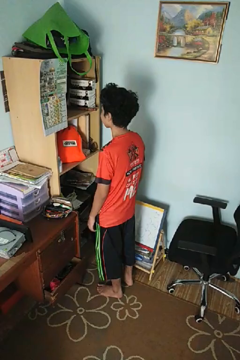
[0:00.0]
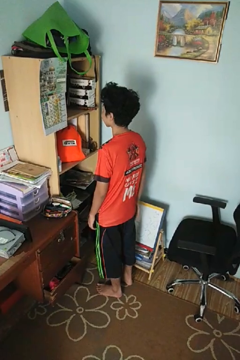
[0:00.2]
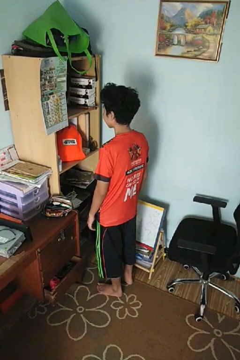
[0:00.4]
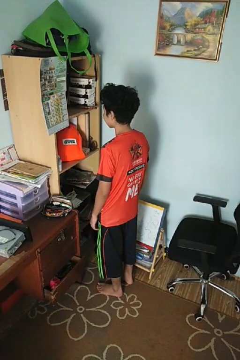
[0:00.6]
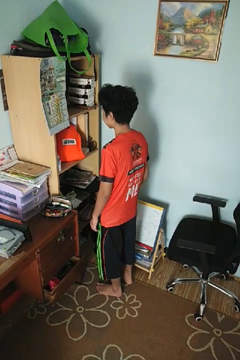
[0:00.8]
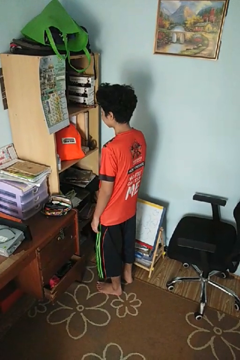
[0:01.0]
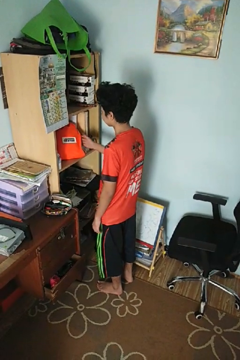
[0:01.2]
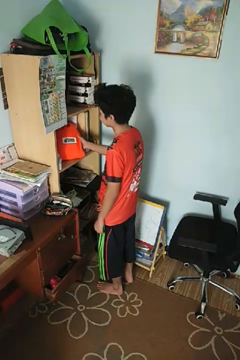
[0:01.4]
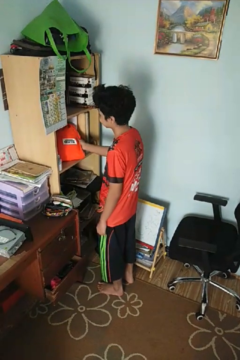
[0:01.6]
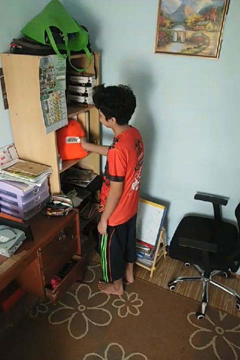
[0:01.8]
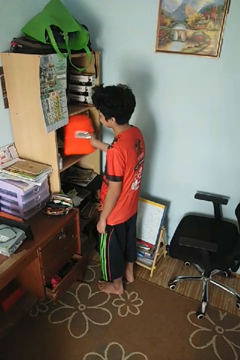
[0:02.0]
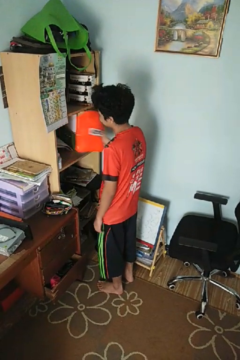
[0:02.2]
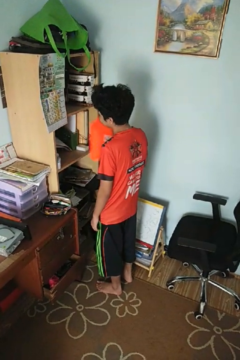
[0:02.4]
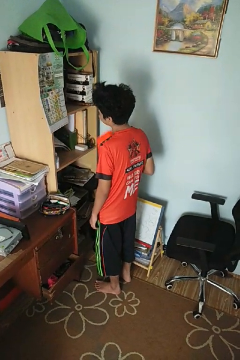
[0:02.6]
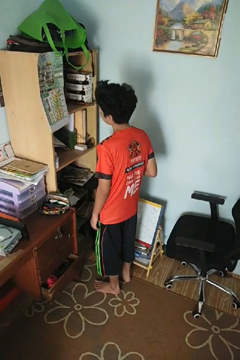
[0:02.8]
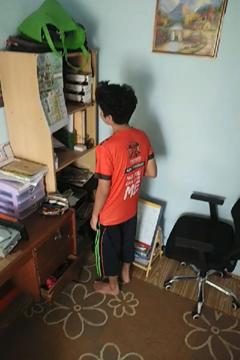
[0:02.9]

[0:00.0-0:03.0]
person picks up object from cabinet

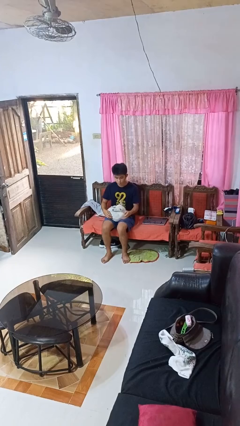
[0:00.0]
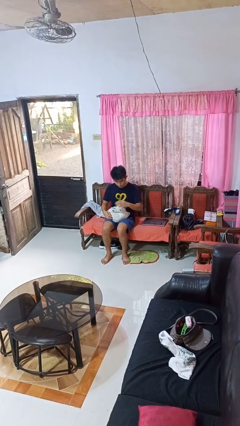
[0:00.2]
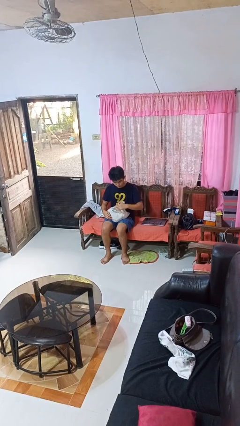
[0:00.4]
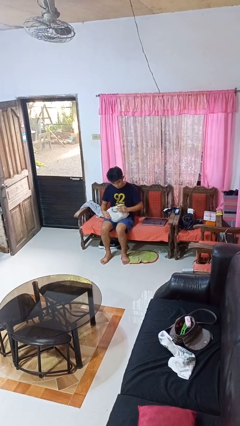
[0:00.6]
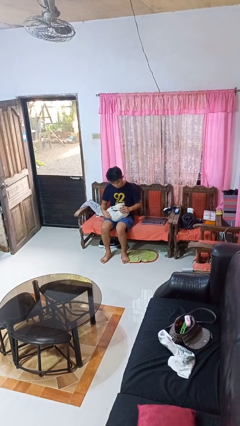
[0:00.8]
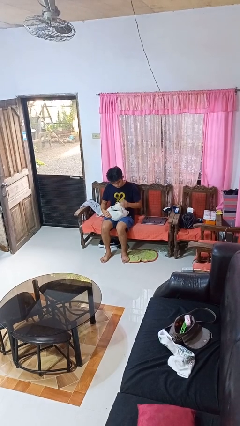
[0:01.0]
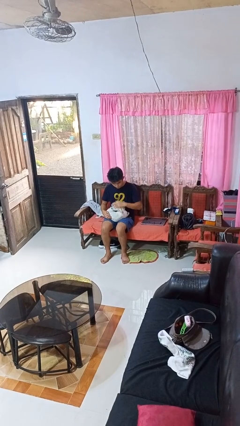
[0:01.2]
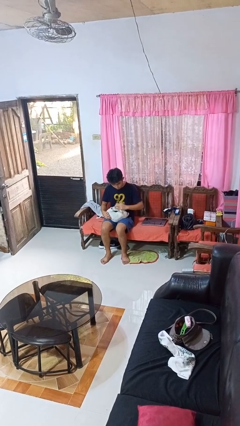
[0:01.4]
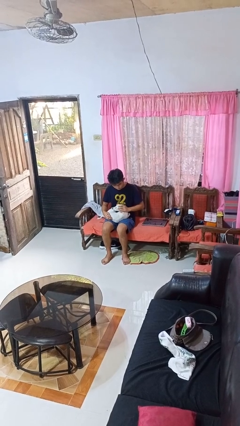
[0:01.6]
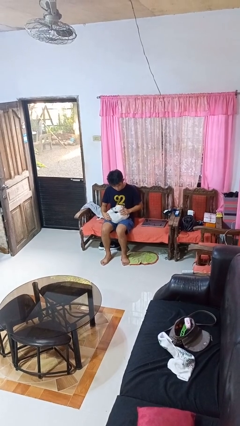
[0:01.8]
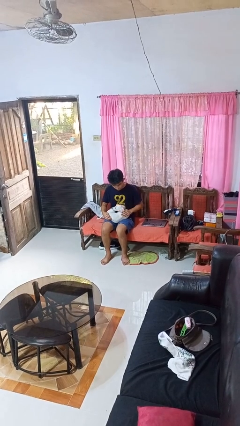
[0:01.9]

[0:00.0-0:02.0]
person pets dog

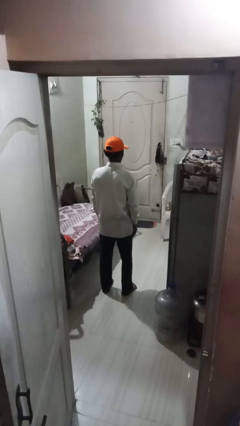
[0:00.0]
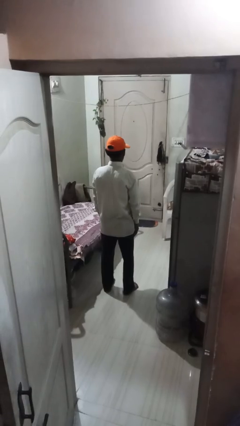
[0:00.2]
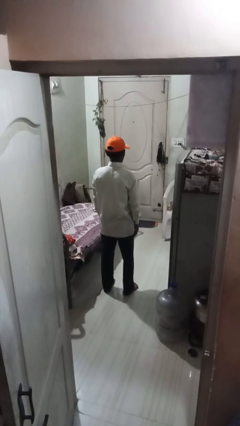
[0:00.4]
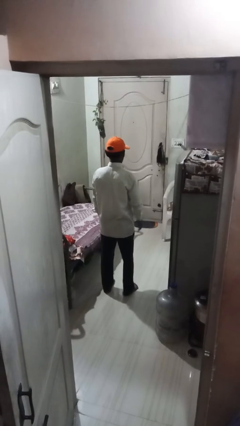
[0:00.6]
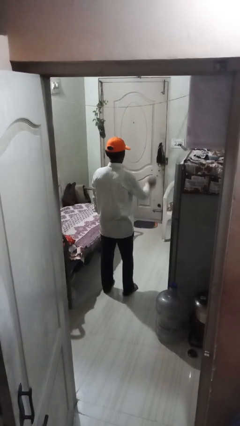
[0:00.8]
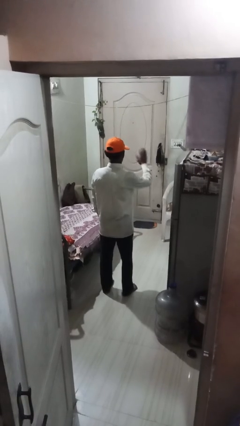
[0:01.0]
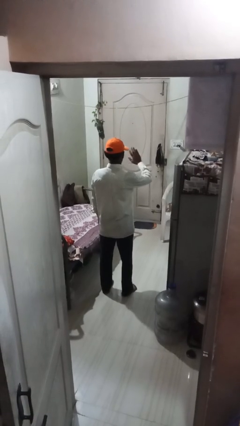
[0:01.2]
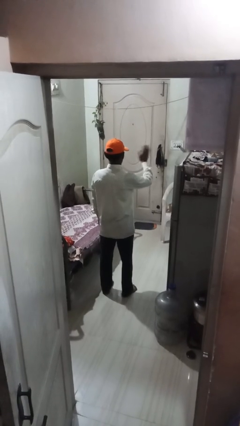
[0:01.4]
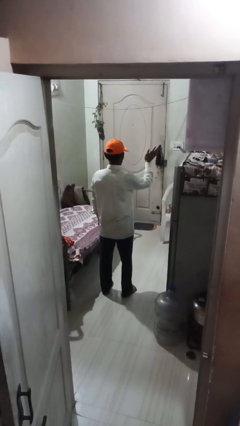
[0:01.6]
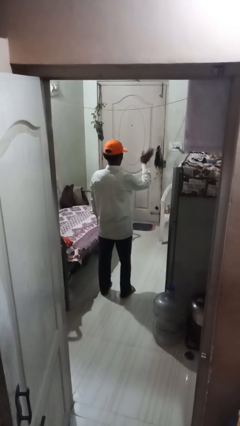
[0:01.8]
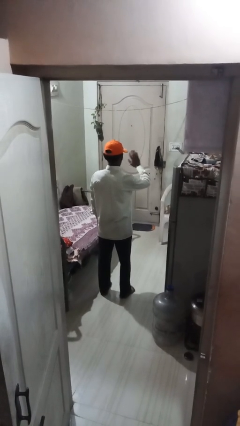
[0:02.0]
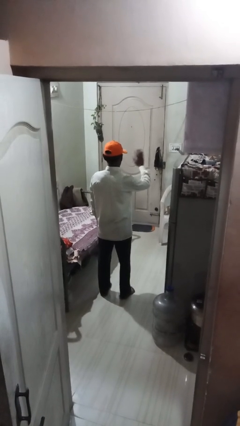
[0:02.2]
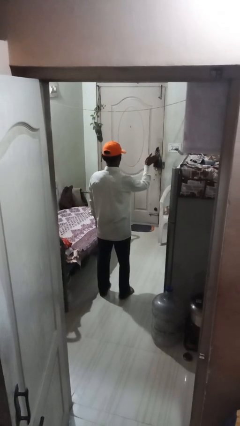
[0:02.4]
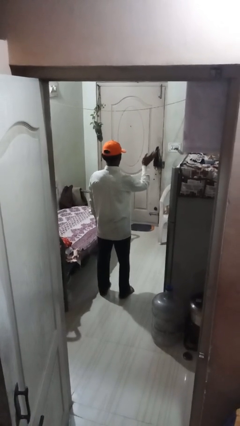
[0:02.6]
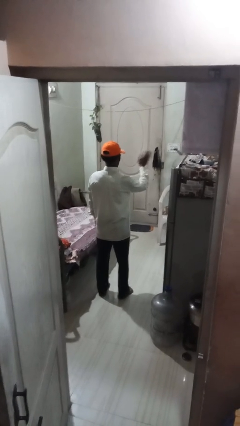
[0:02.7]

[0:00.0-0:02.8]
person waves at person

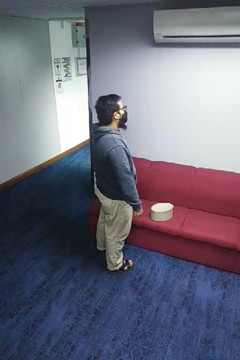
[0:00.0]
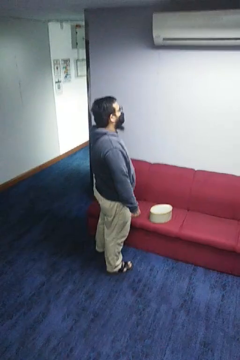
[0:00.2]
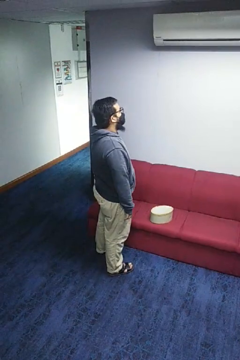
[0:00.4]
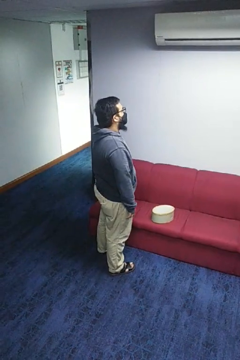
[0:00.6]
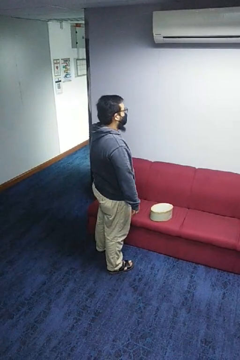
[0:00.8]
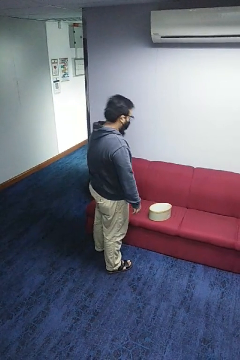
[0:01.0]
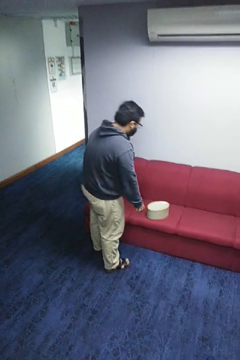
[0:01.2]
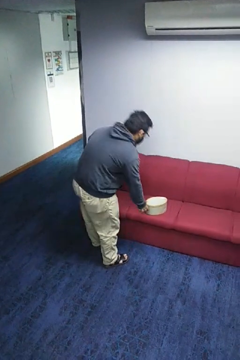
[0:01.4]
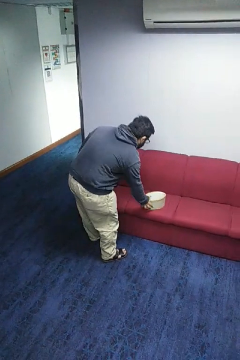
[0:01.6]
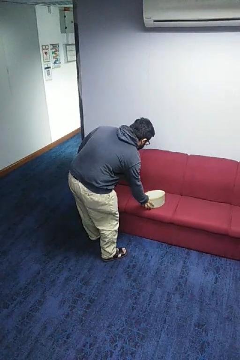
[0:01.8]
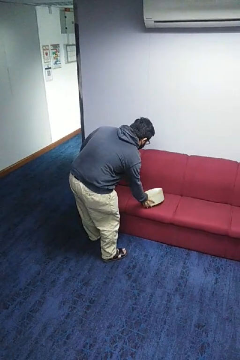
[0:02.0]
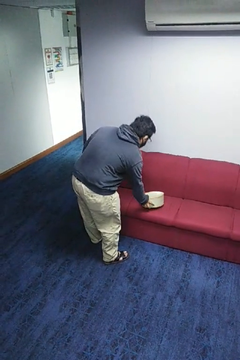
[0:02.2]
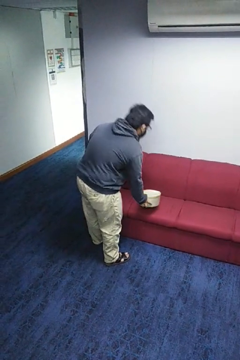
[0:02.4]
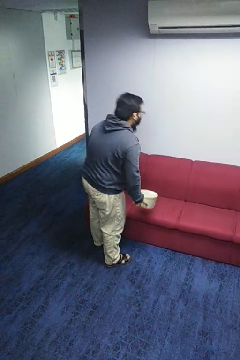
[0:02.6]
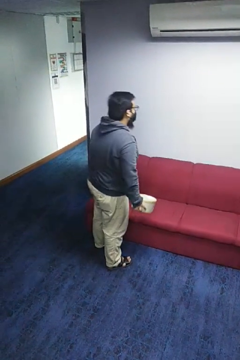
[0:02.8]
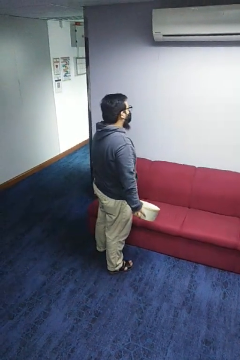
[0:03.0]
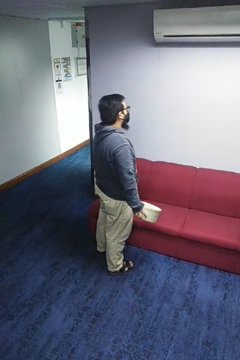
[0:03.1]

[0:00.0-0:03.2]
person picks up object from couch

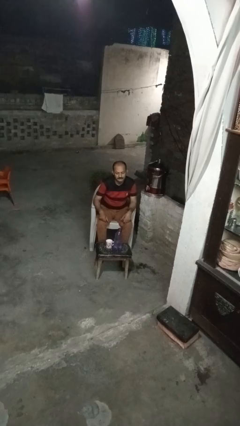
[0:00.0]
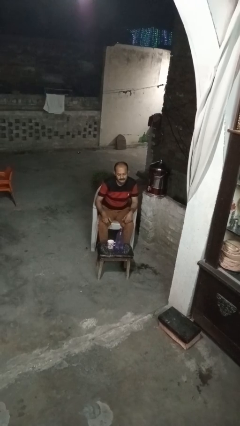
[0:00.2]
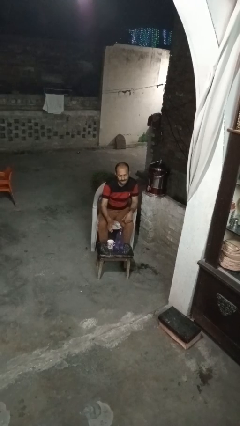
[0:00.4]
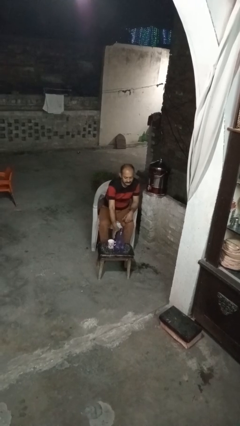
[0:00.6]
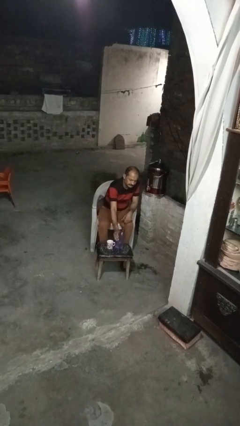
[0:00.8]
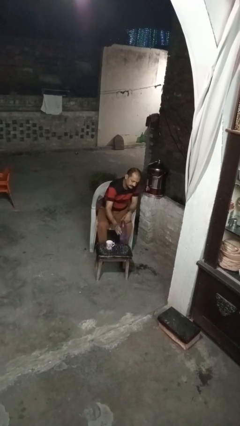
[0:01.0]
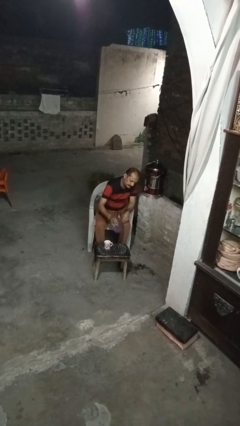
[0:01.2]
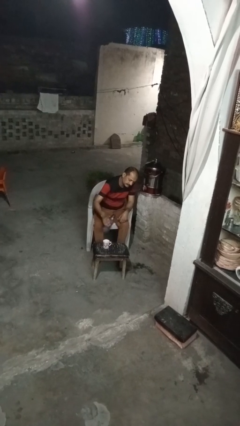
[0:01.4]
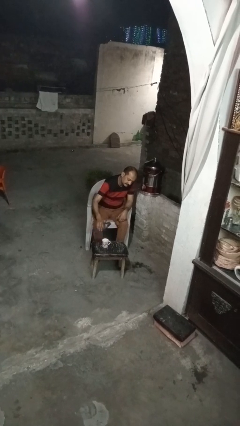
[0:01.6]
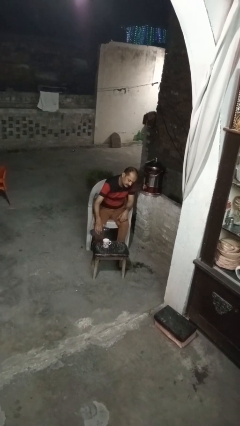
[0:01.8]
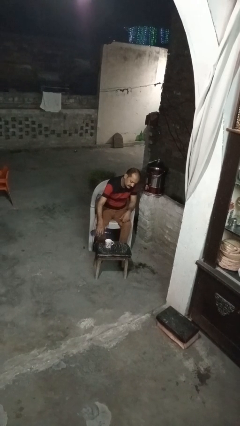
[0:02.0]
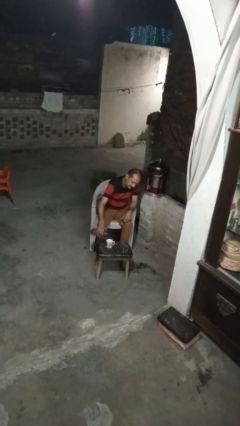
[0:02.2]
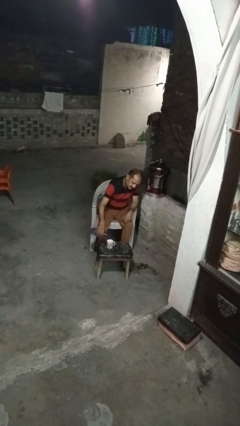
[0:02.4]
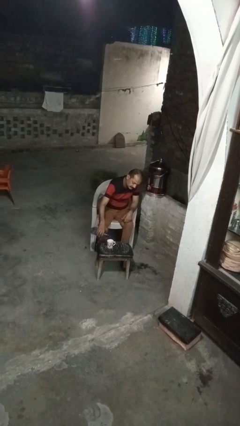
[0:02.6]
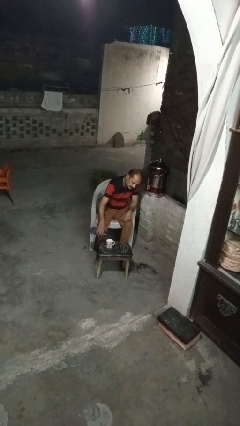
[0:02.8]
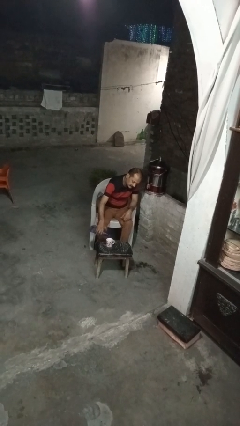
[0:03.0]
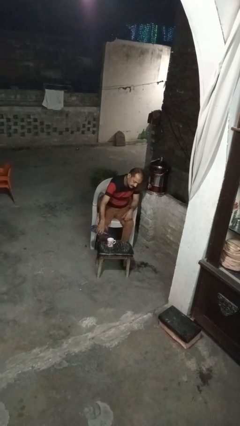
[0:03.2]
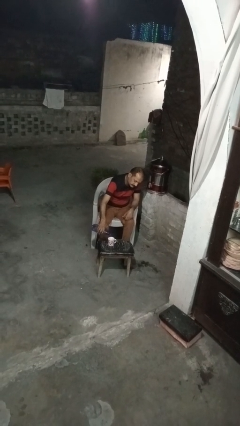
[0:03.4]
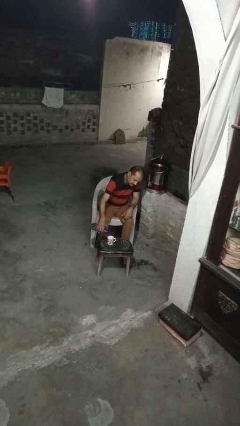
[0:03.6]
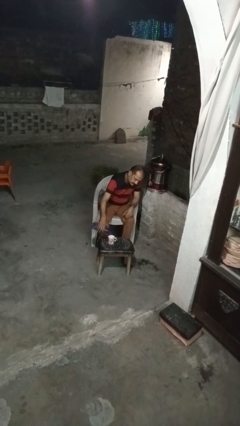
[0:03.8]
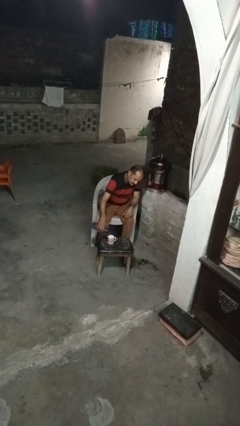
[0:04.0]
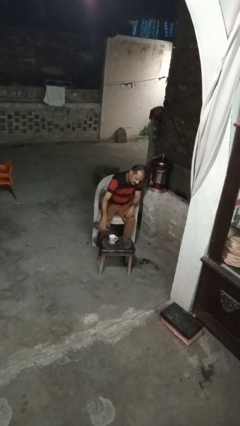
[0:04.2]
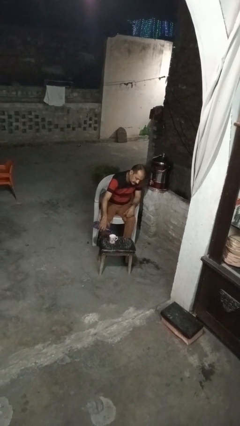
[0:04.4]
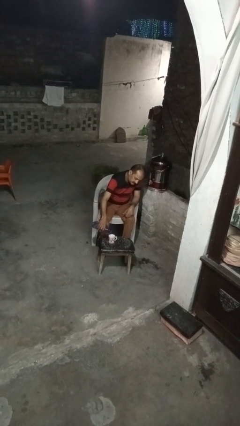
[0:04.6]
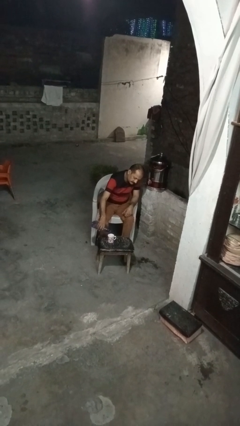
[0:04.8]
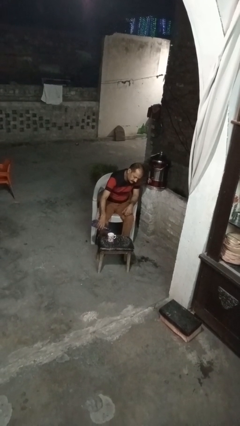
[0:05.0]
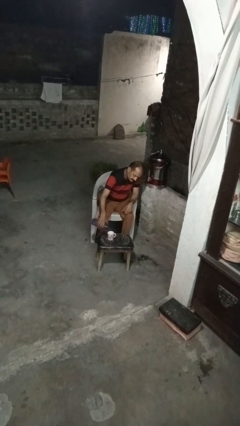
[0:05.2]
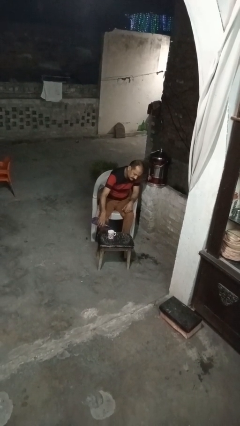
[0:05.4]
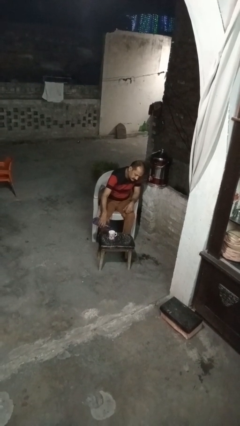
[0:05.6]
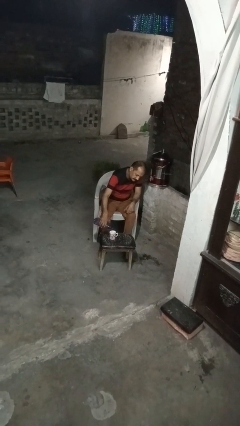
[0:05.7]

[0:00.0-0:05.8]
person pours liquid into cup

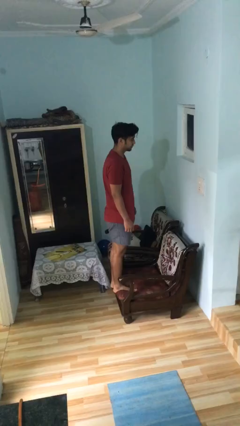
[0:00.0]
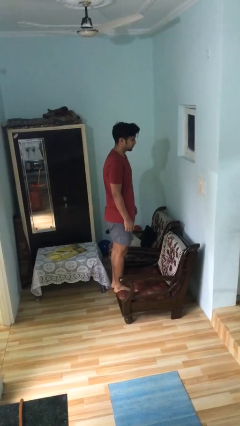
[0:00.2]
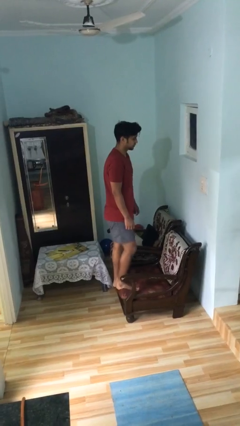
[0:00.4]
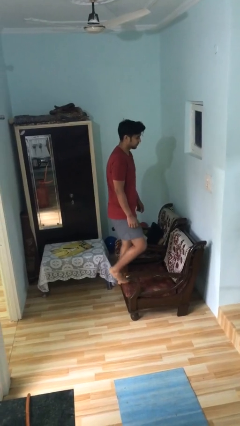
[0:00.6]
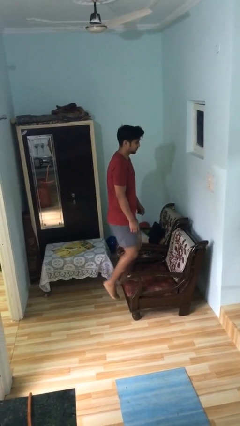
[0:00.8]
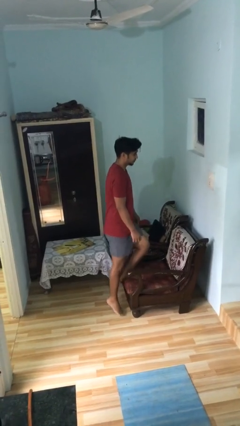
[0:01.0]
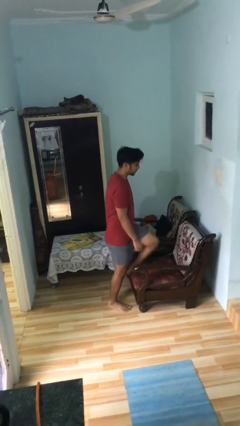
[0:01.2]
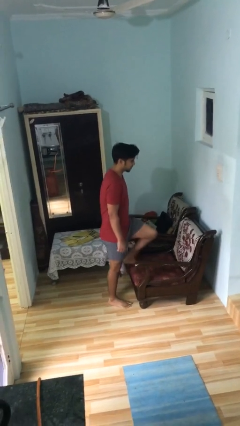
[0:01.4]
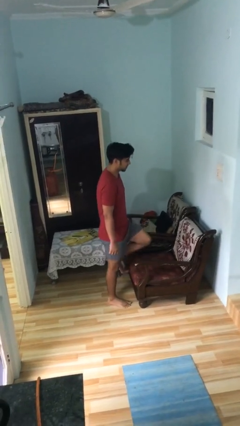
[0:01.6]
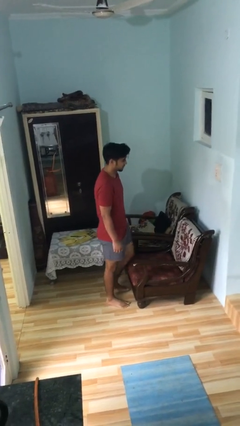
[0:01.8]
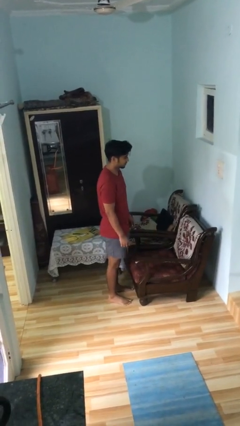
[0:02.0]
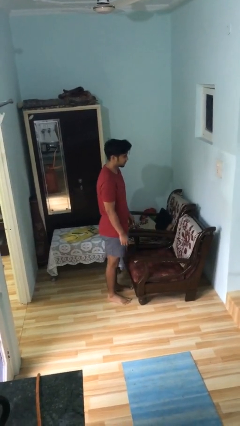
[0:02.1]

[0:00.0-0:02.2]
person climbs off couch
